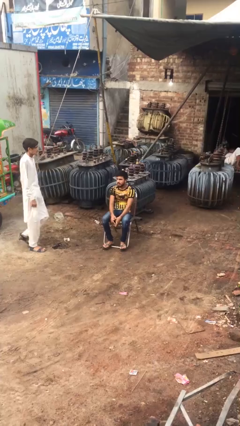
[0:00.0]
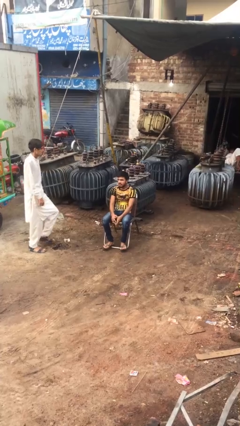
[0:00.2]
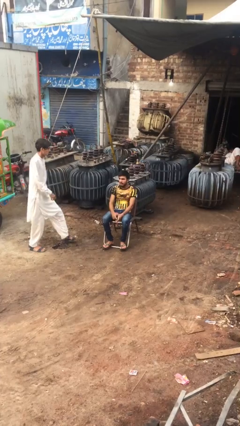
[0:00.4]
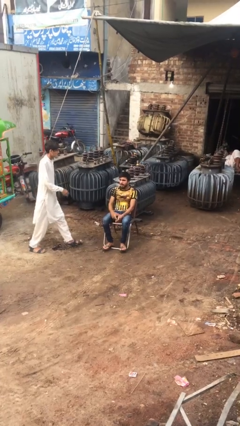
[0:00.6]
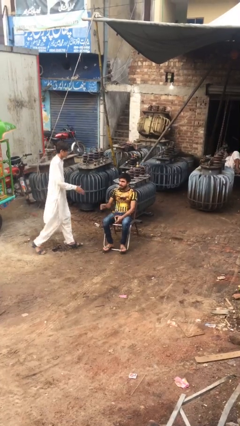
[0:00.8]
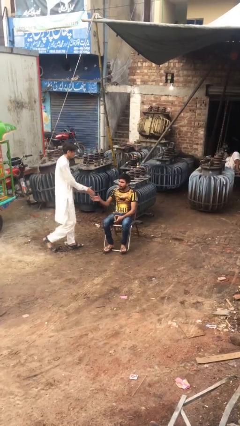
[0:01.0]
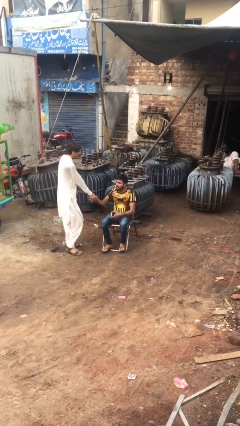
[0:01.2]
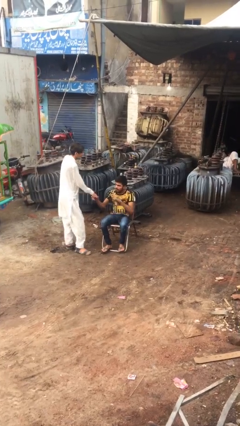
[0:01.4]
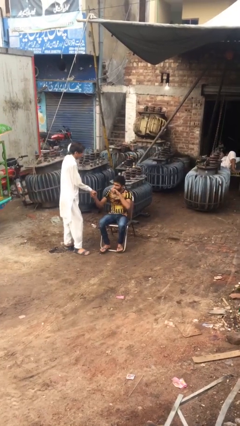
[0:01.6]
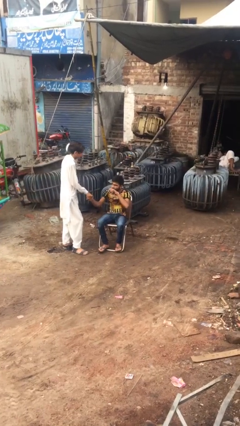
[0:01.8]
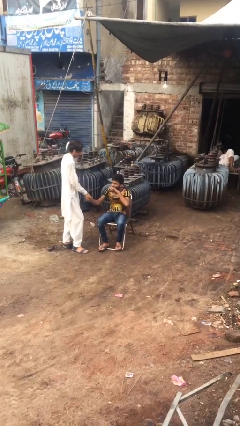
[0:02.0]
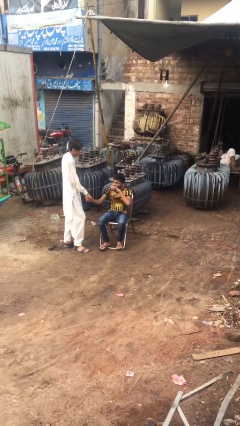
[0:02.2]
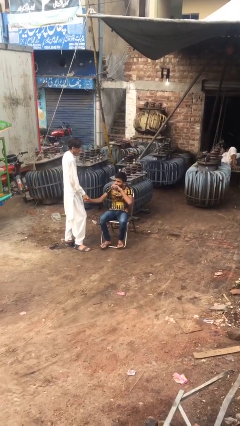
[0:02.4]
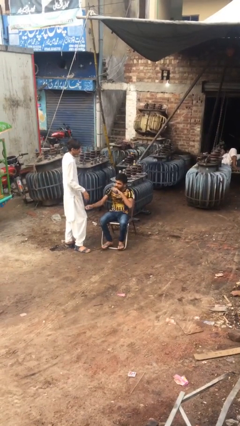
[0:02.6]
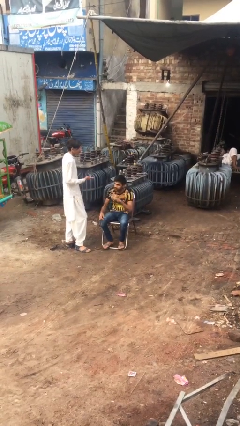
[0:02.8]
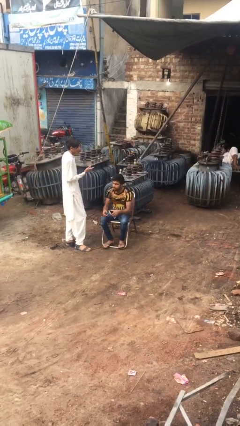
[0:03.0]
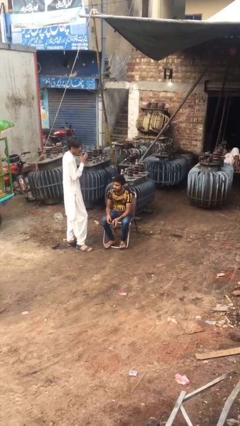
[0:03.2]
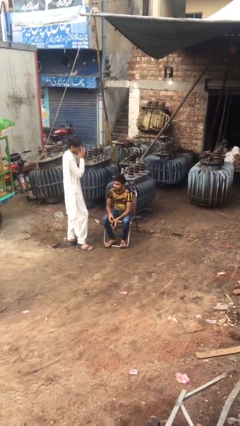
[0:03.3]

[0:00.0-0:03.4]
person shakes hand

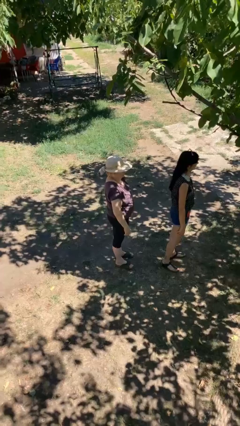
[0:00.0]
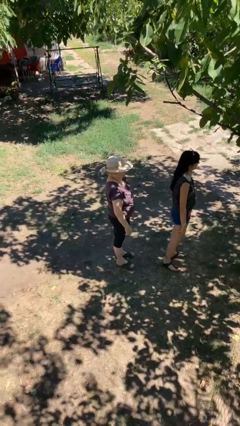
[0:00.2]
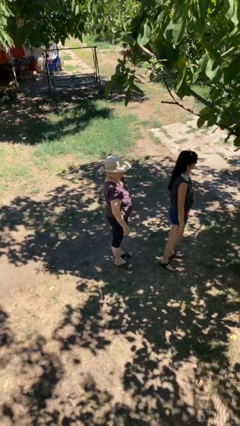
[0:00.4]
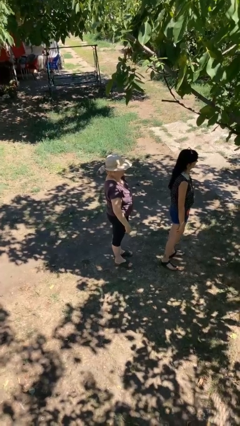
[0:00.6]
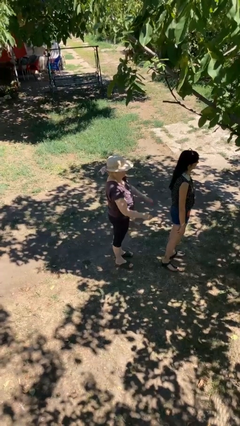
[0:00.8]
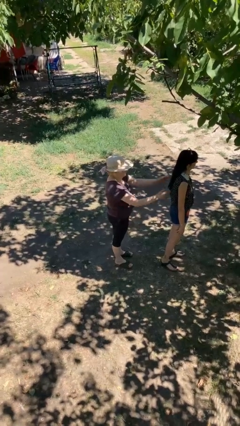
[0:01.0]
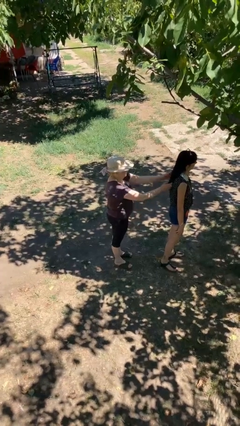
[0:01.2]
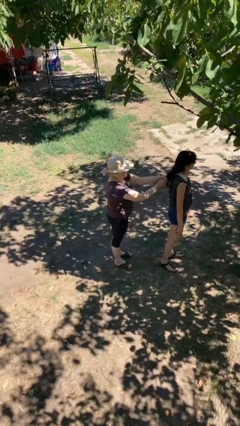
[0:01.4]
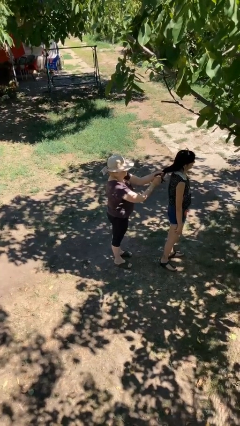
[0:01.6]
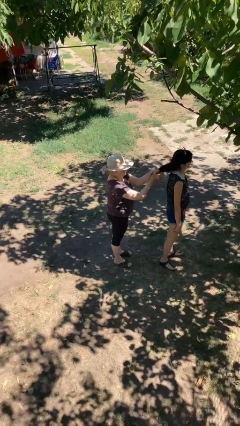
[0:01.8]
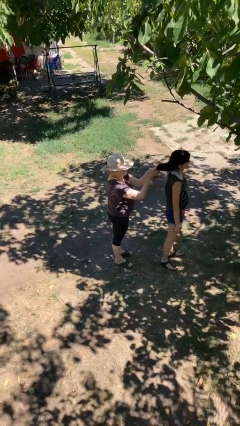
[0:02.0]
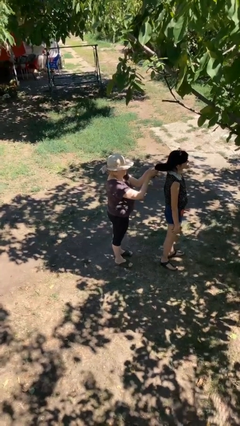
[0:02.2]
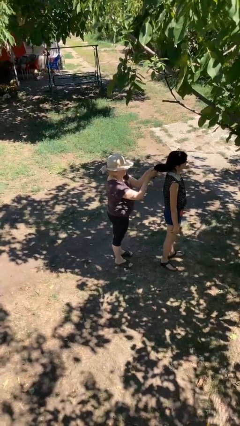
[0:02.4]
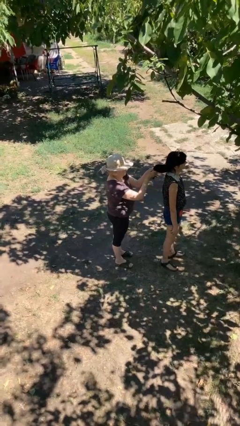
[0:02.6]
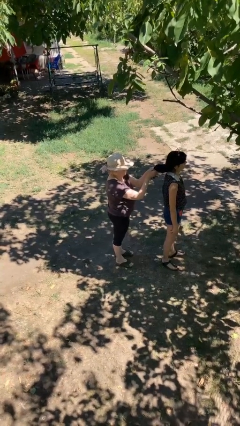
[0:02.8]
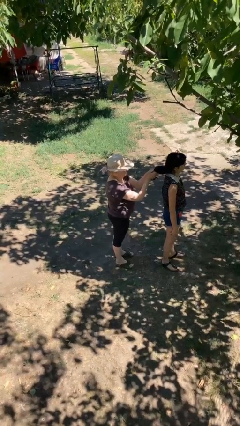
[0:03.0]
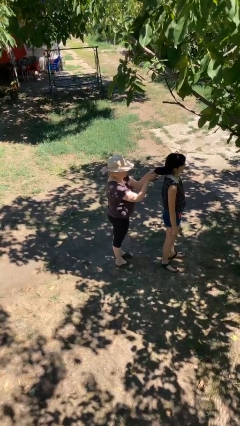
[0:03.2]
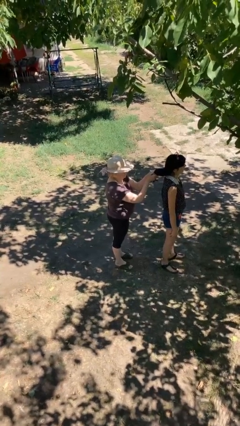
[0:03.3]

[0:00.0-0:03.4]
person grabs person by hair

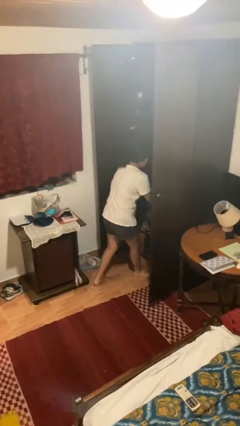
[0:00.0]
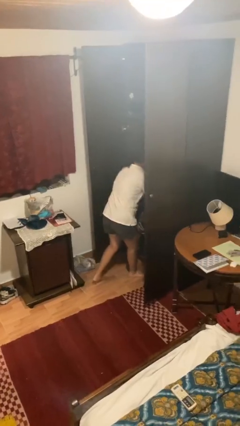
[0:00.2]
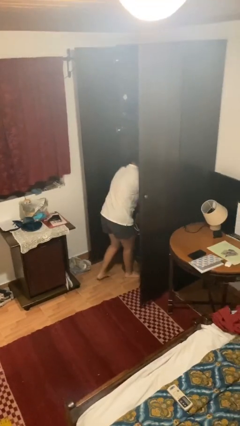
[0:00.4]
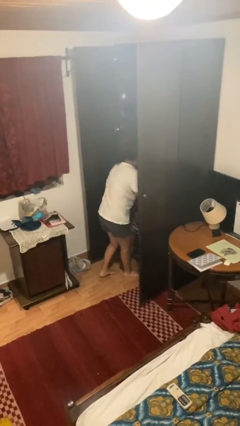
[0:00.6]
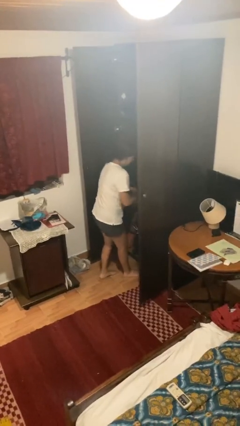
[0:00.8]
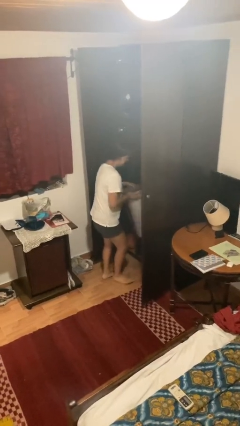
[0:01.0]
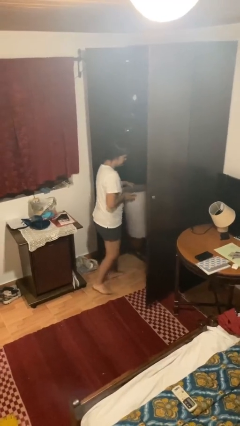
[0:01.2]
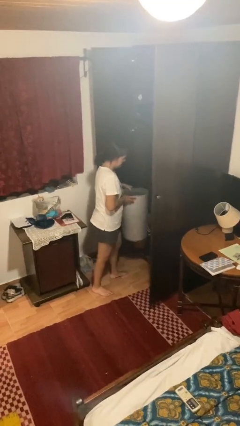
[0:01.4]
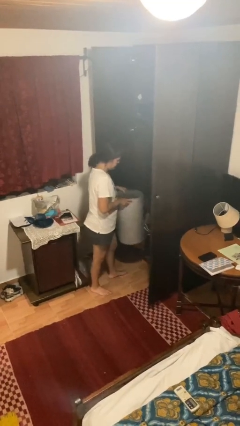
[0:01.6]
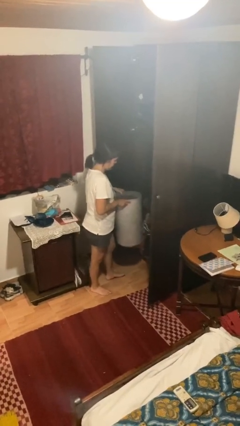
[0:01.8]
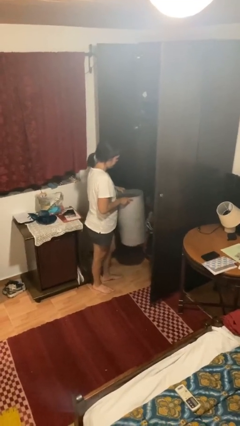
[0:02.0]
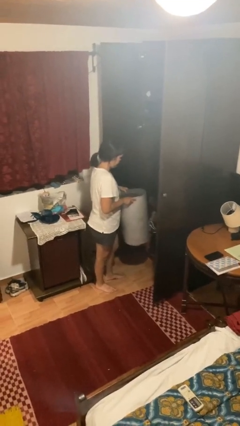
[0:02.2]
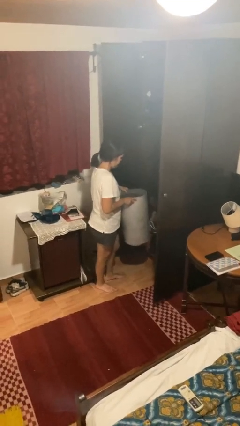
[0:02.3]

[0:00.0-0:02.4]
person picks up object from cabinet

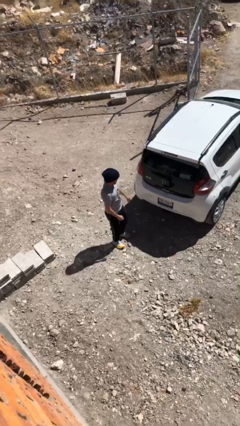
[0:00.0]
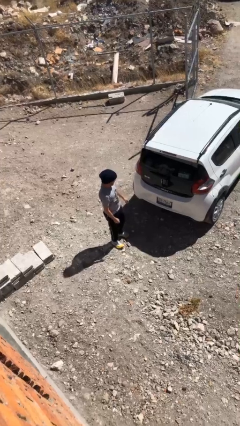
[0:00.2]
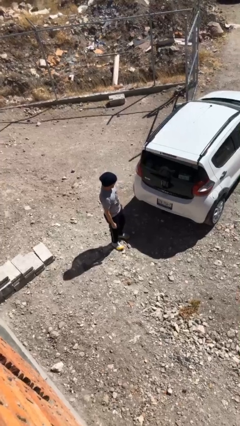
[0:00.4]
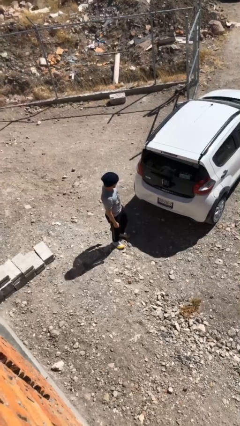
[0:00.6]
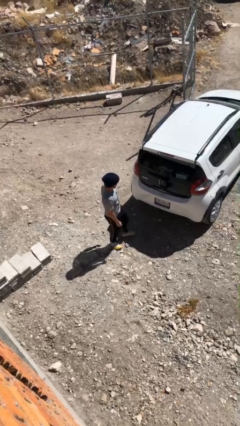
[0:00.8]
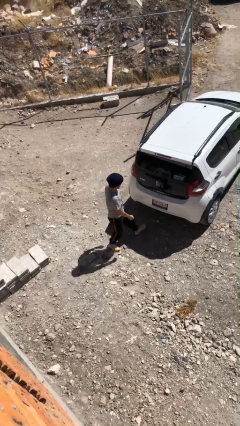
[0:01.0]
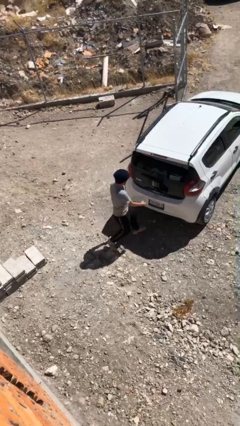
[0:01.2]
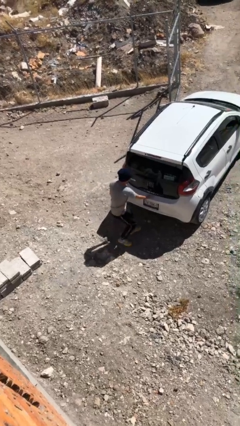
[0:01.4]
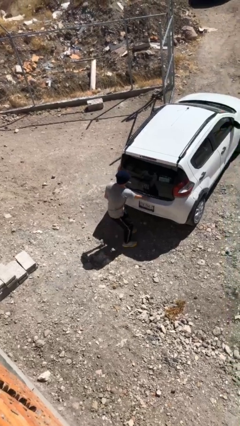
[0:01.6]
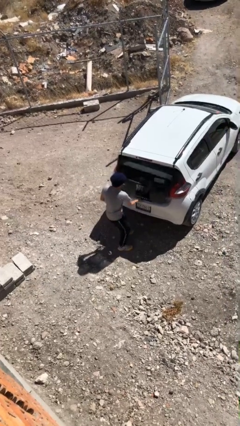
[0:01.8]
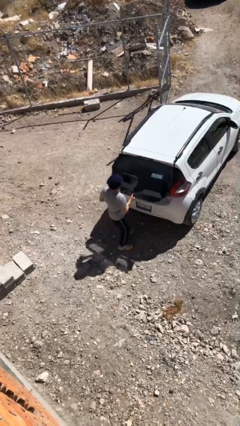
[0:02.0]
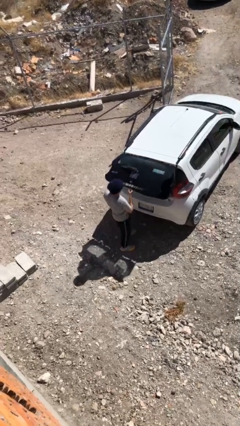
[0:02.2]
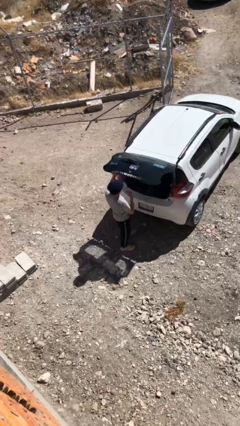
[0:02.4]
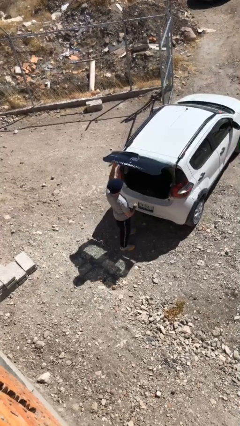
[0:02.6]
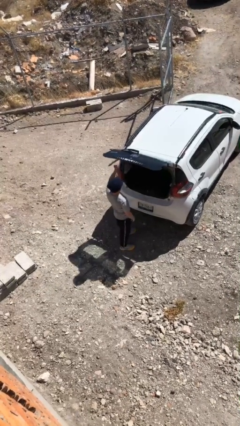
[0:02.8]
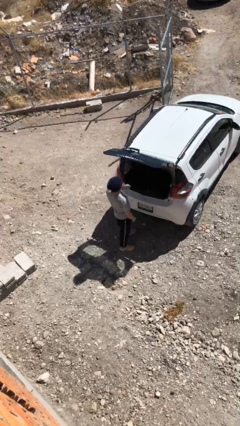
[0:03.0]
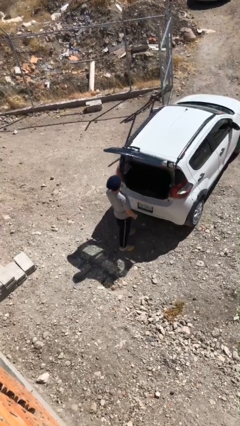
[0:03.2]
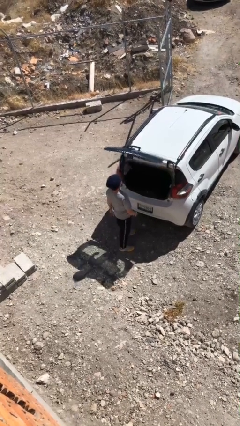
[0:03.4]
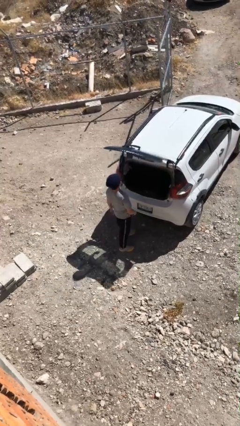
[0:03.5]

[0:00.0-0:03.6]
person opens car trunk

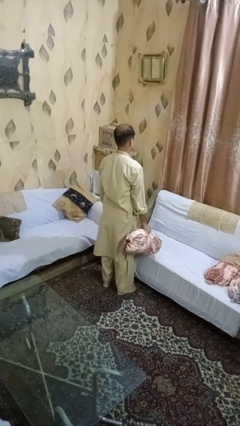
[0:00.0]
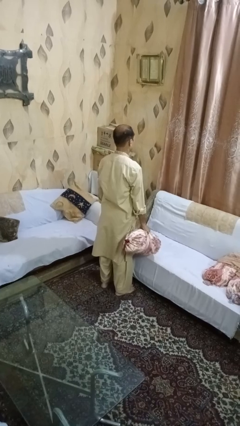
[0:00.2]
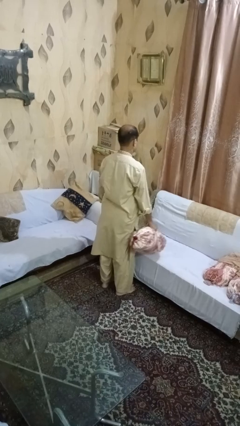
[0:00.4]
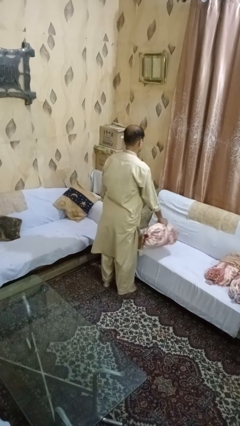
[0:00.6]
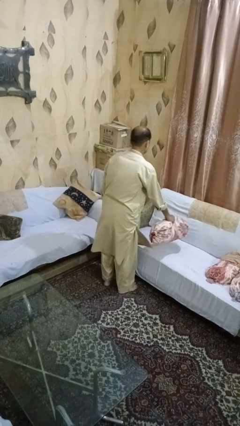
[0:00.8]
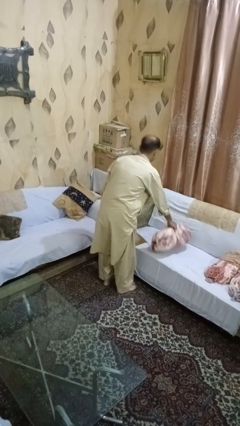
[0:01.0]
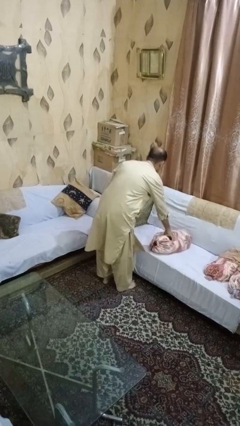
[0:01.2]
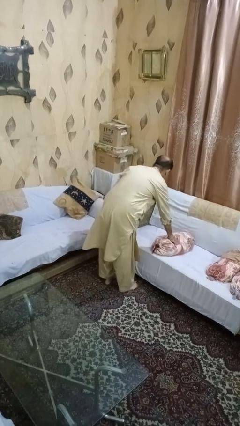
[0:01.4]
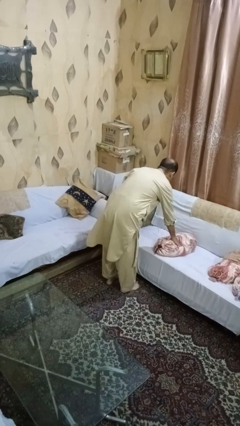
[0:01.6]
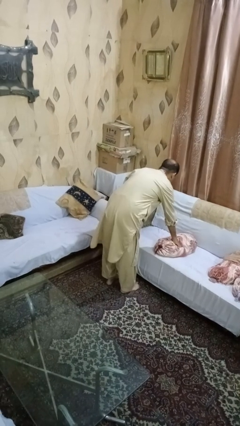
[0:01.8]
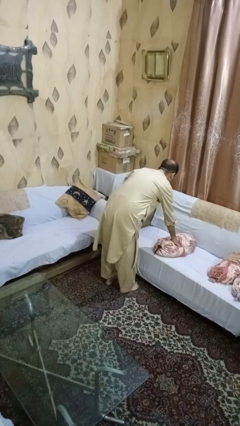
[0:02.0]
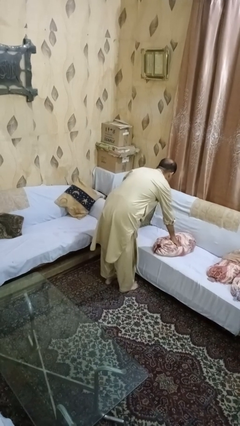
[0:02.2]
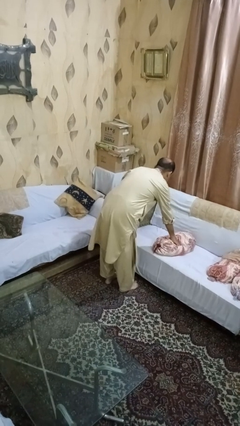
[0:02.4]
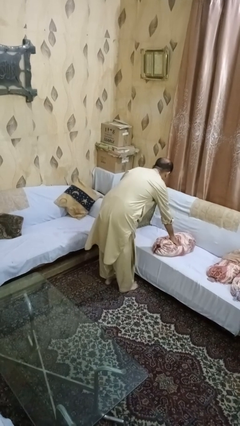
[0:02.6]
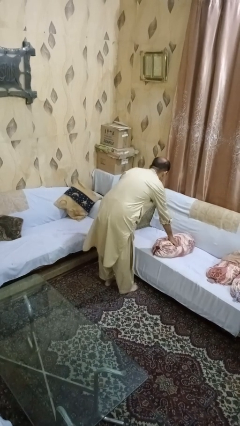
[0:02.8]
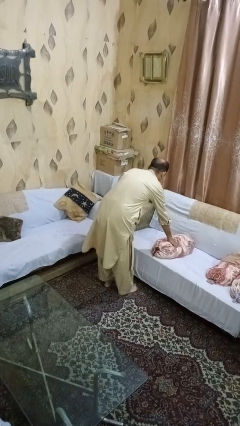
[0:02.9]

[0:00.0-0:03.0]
person puts down object on couch

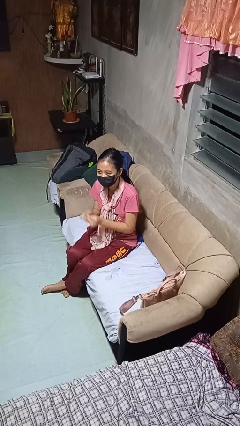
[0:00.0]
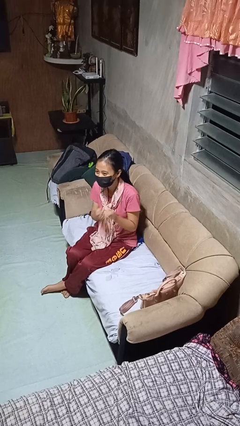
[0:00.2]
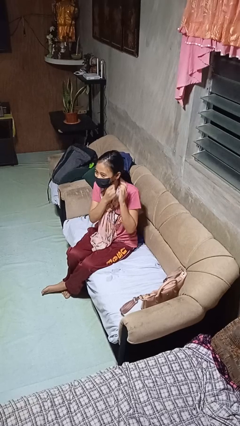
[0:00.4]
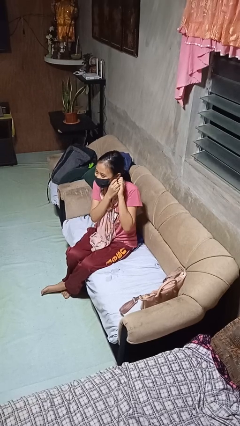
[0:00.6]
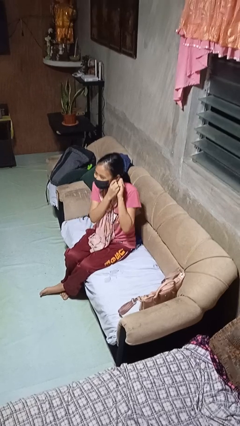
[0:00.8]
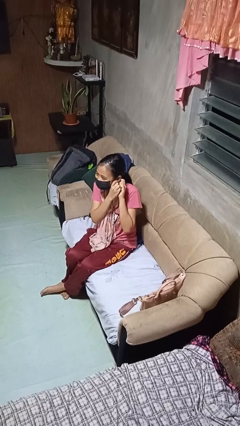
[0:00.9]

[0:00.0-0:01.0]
person takes off earrings

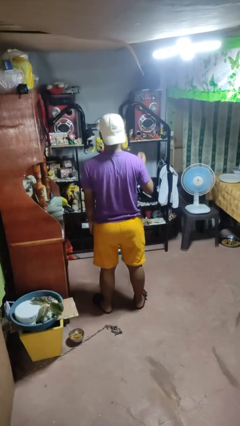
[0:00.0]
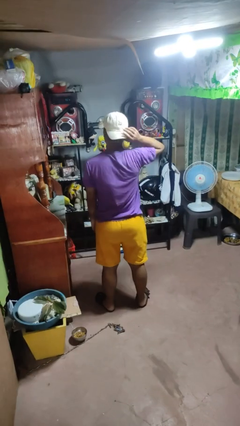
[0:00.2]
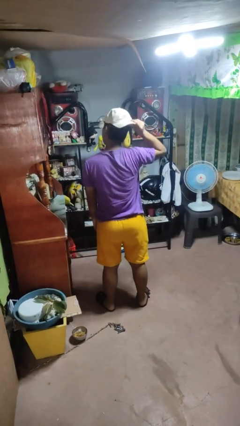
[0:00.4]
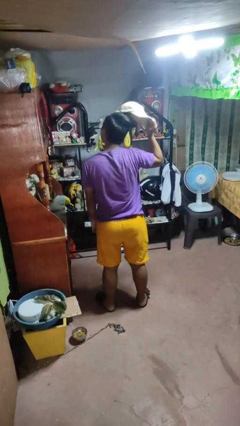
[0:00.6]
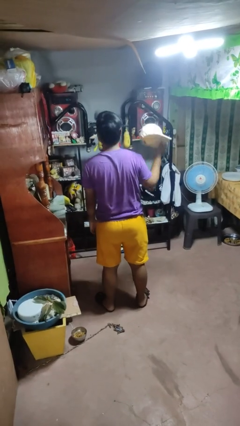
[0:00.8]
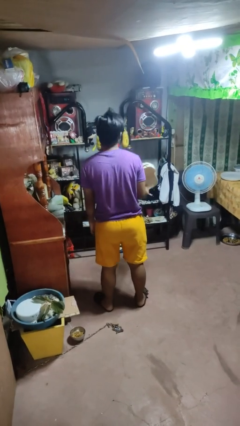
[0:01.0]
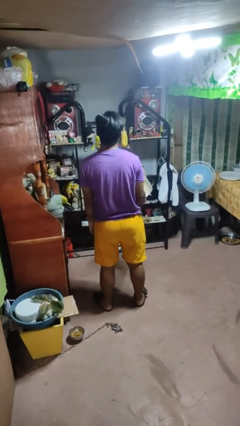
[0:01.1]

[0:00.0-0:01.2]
person takes off hat
